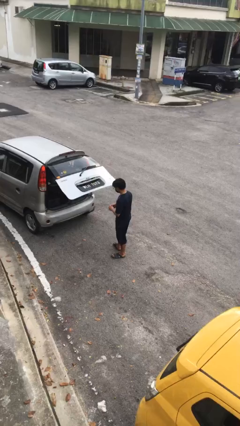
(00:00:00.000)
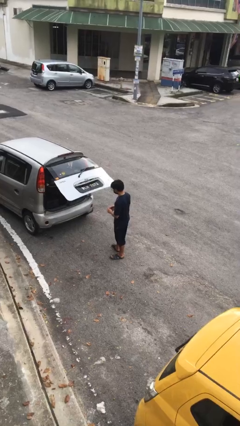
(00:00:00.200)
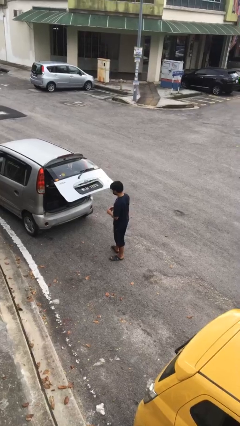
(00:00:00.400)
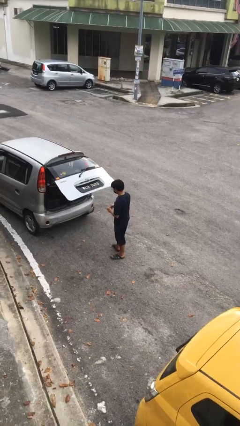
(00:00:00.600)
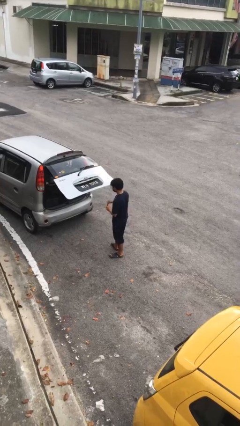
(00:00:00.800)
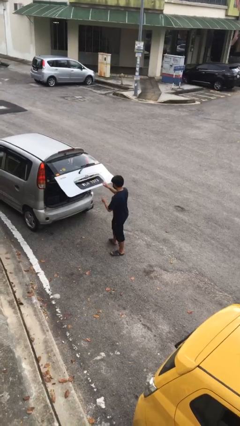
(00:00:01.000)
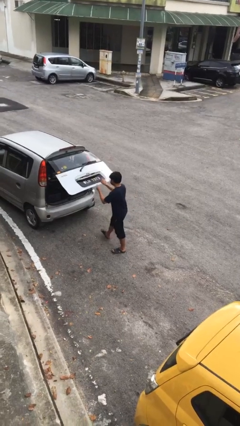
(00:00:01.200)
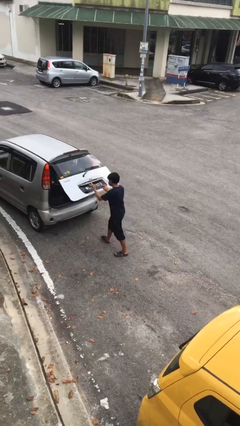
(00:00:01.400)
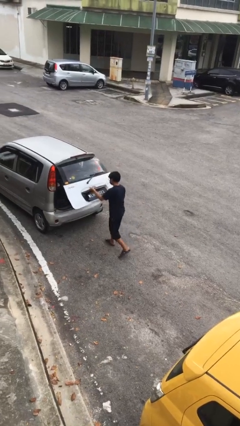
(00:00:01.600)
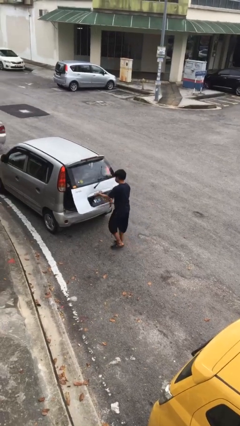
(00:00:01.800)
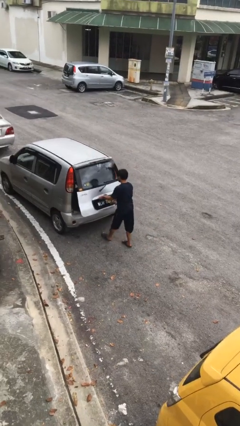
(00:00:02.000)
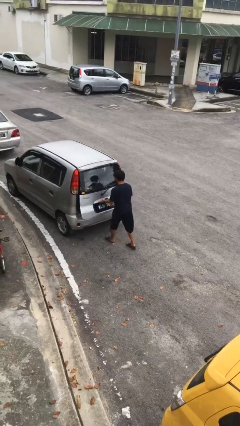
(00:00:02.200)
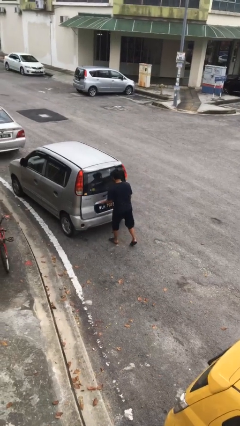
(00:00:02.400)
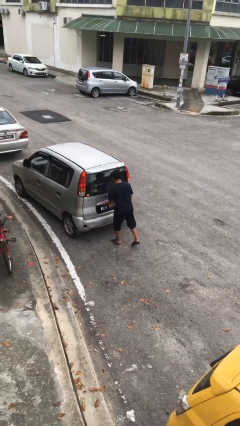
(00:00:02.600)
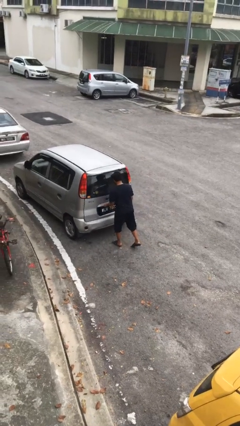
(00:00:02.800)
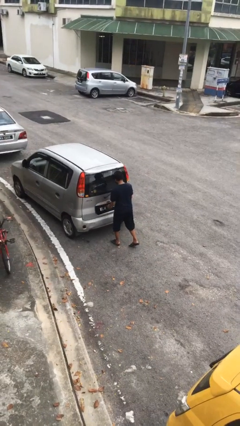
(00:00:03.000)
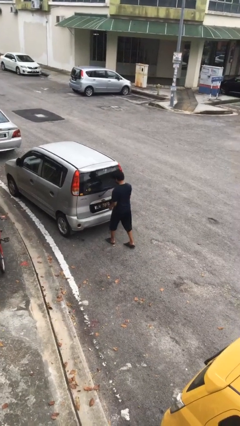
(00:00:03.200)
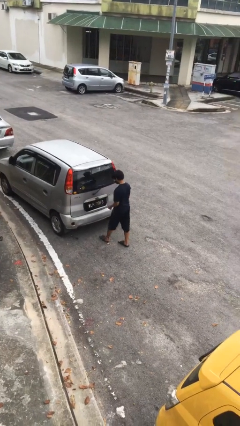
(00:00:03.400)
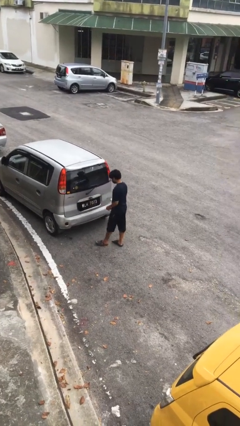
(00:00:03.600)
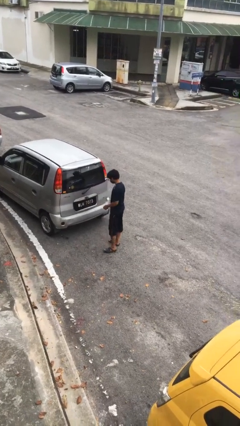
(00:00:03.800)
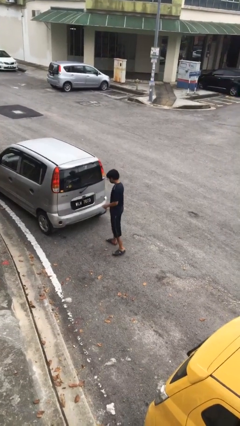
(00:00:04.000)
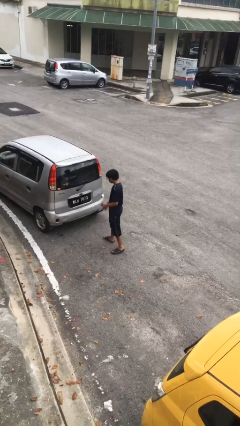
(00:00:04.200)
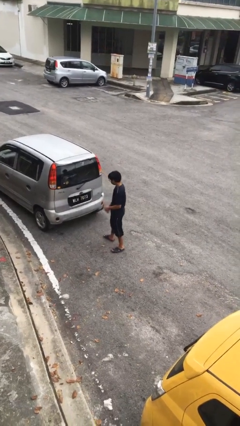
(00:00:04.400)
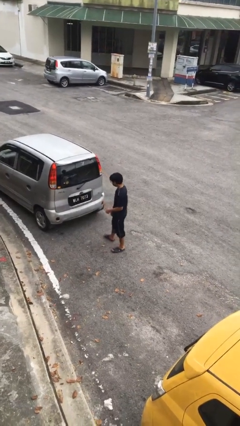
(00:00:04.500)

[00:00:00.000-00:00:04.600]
person closes car trunk

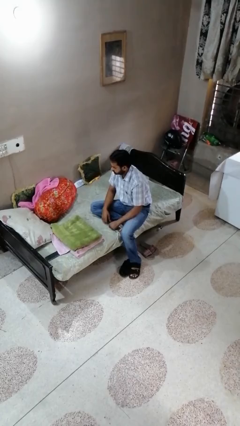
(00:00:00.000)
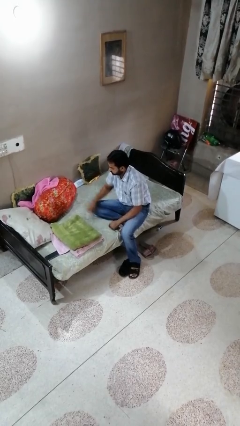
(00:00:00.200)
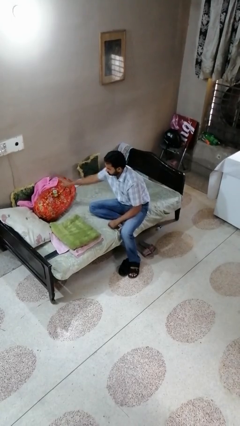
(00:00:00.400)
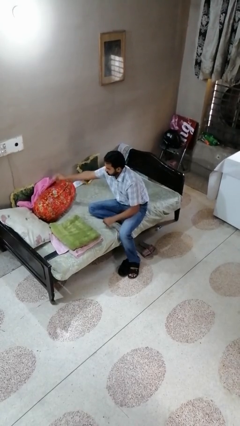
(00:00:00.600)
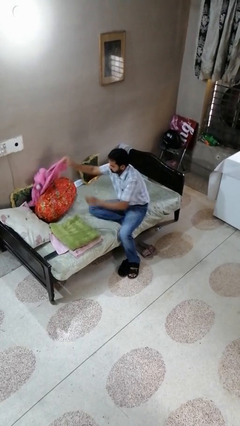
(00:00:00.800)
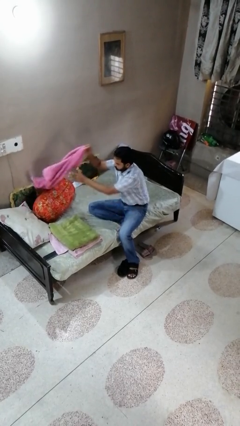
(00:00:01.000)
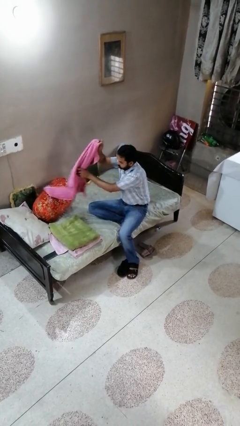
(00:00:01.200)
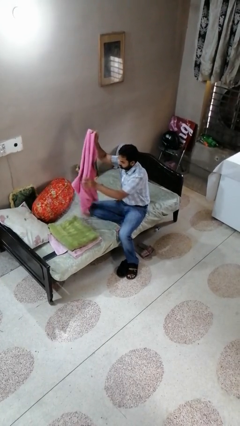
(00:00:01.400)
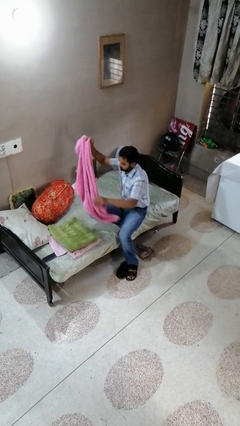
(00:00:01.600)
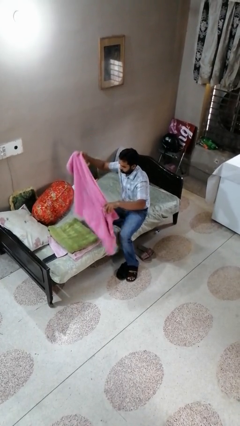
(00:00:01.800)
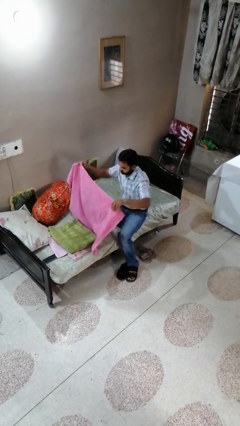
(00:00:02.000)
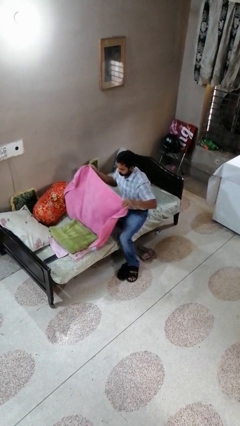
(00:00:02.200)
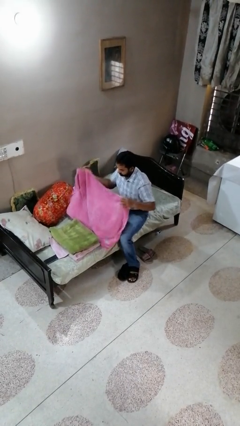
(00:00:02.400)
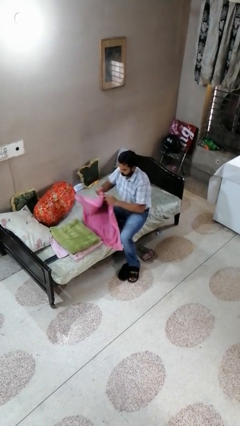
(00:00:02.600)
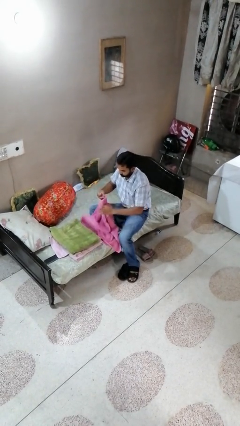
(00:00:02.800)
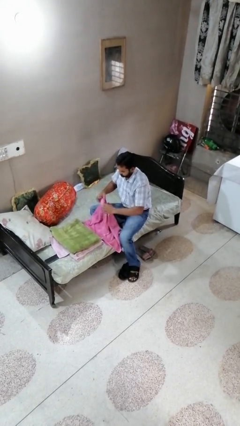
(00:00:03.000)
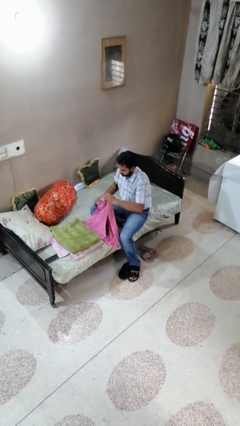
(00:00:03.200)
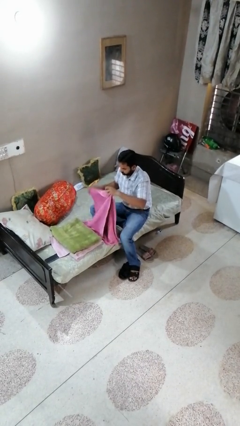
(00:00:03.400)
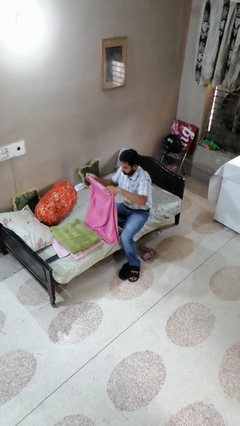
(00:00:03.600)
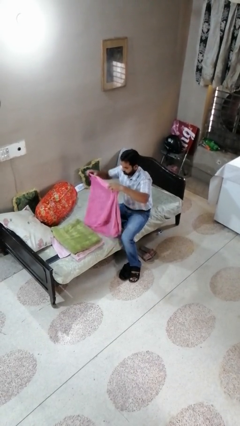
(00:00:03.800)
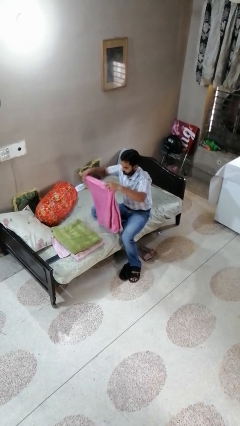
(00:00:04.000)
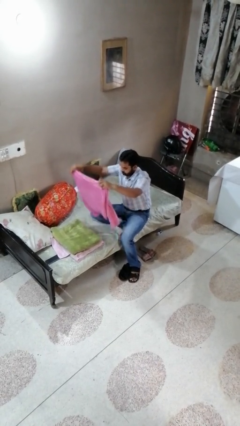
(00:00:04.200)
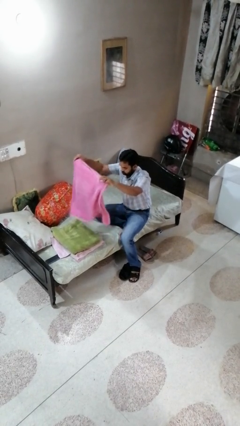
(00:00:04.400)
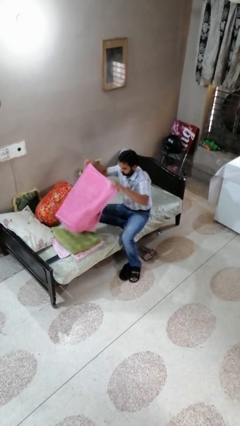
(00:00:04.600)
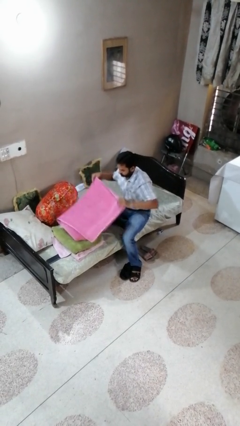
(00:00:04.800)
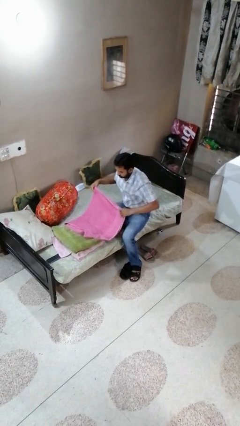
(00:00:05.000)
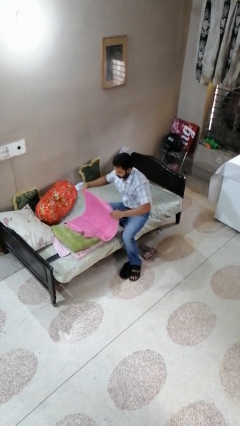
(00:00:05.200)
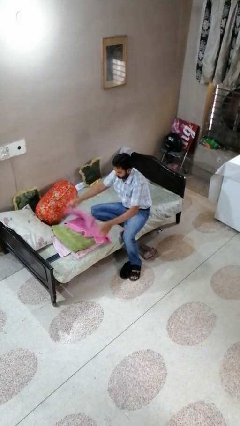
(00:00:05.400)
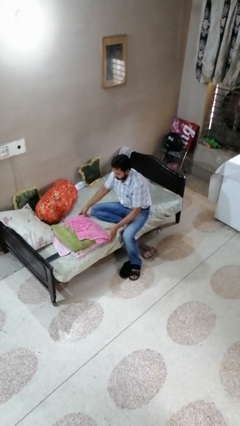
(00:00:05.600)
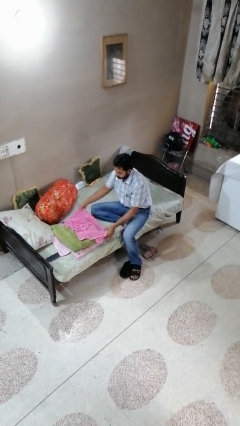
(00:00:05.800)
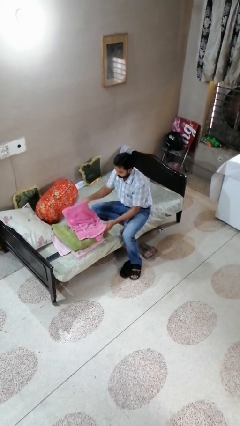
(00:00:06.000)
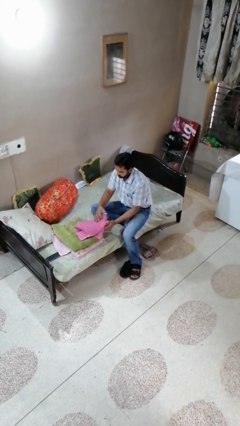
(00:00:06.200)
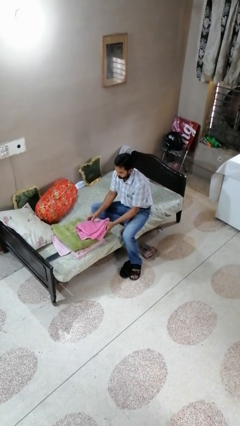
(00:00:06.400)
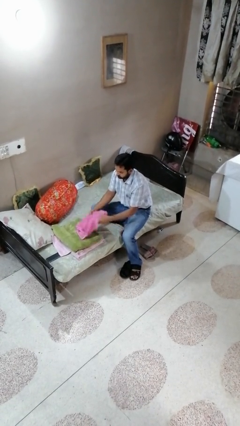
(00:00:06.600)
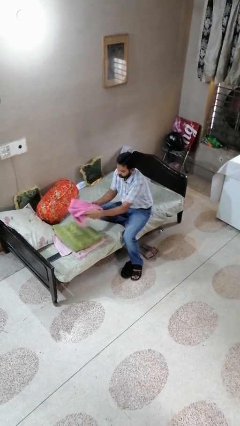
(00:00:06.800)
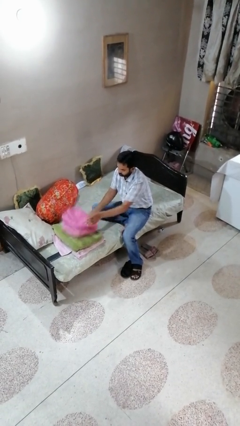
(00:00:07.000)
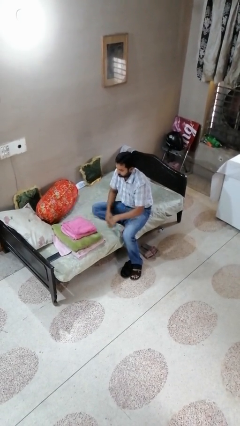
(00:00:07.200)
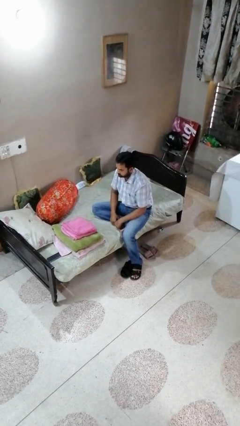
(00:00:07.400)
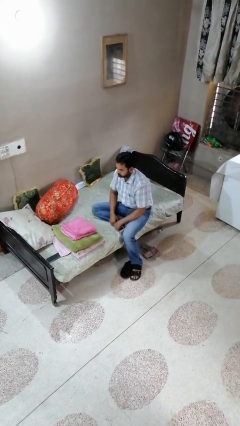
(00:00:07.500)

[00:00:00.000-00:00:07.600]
person folds towel

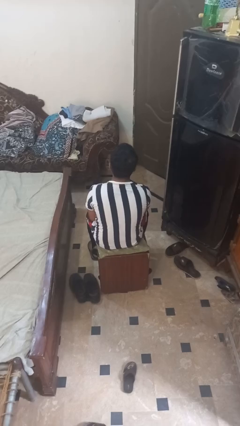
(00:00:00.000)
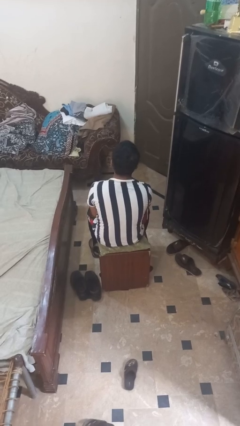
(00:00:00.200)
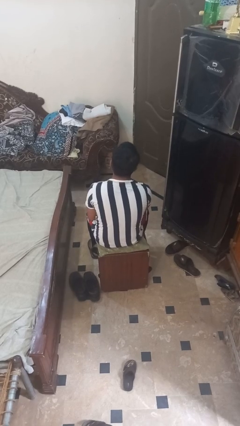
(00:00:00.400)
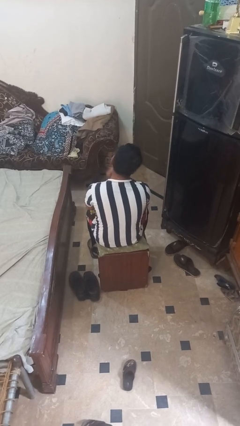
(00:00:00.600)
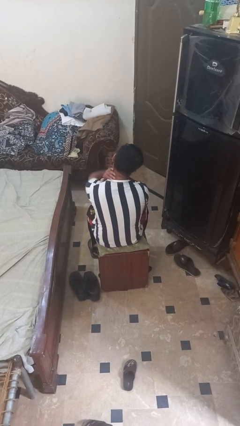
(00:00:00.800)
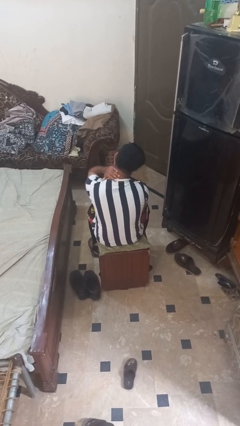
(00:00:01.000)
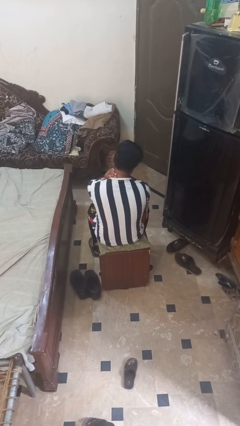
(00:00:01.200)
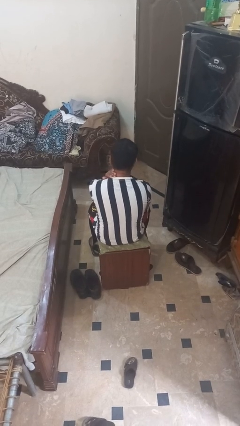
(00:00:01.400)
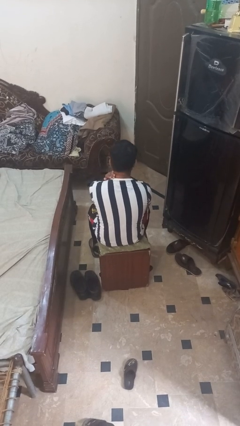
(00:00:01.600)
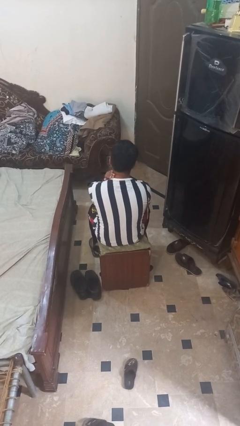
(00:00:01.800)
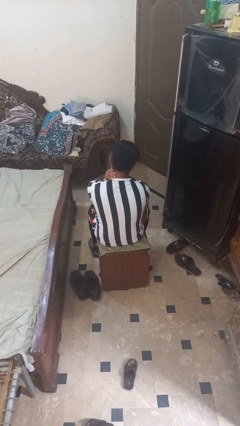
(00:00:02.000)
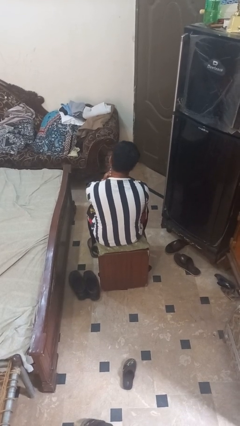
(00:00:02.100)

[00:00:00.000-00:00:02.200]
person rubs neck

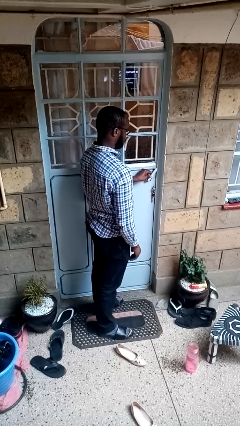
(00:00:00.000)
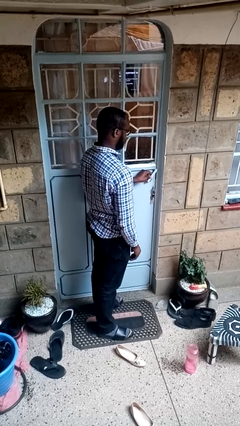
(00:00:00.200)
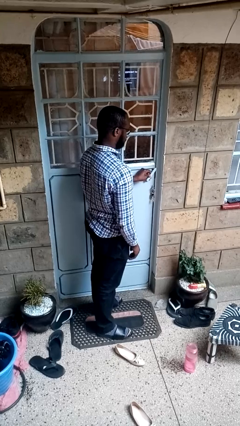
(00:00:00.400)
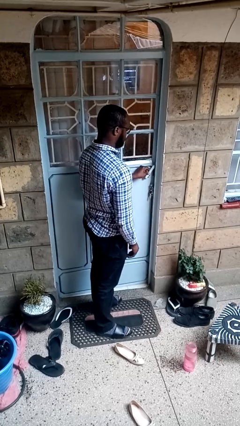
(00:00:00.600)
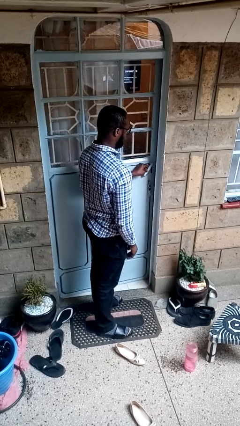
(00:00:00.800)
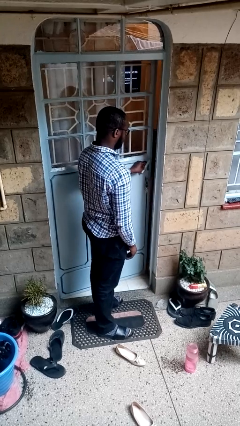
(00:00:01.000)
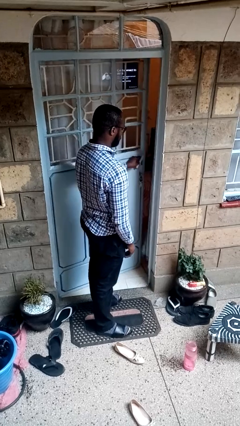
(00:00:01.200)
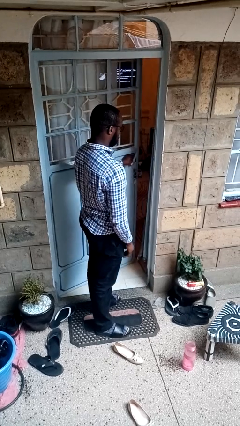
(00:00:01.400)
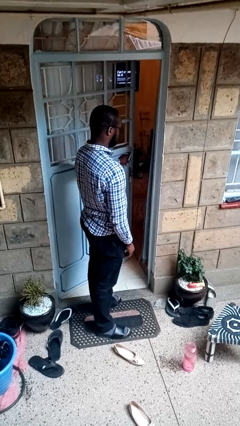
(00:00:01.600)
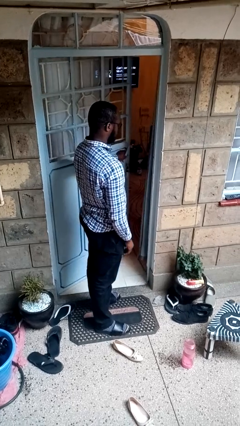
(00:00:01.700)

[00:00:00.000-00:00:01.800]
person opens facility door

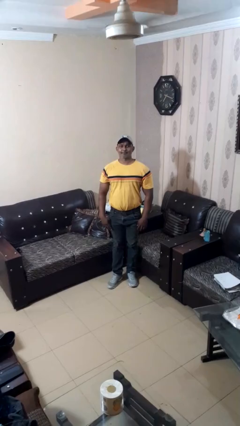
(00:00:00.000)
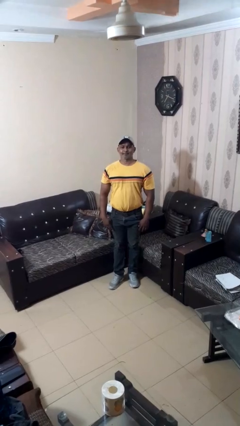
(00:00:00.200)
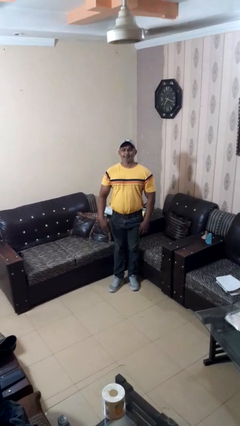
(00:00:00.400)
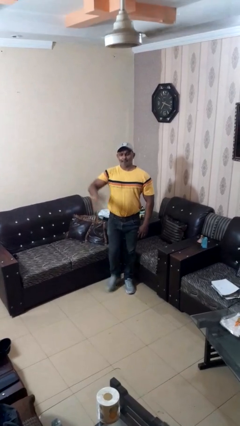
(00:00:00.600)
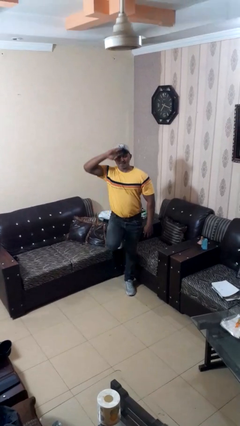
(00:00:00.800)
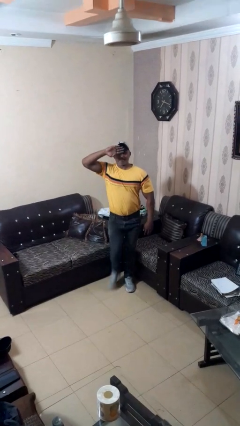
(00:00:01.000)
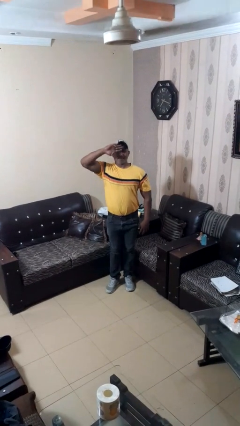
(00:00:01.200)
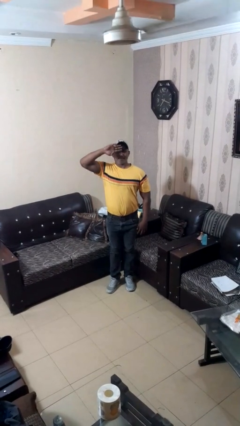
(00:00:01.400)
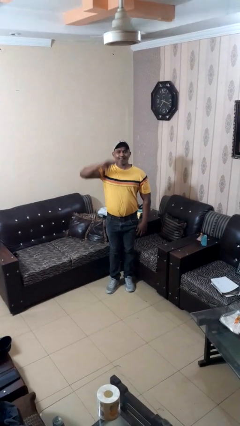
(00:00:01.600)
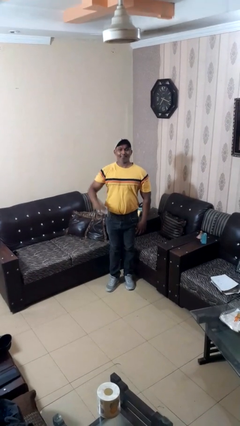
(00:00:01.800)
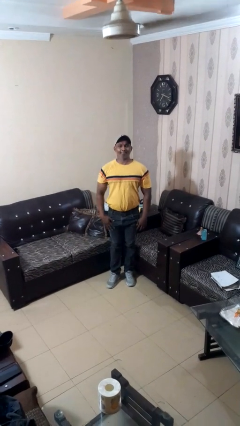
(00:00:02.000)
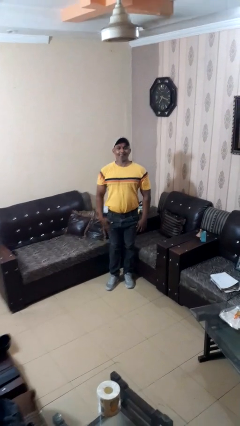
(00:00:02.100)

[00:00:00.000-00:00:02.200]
person salutes
